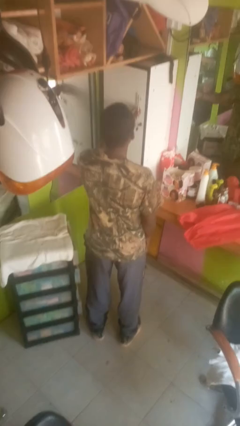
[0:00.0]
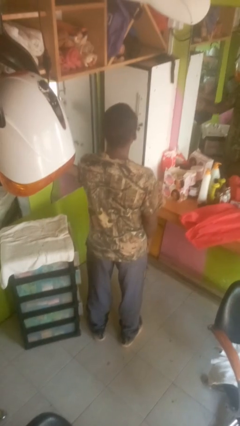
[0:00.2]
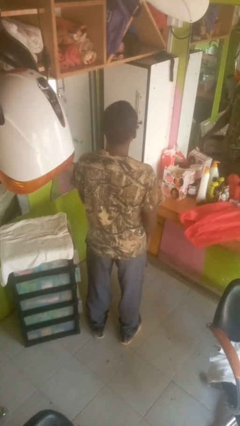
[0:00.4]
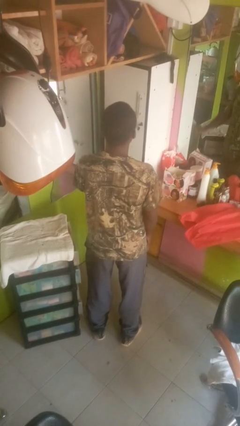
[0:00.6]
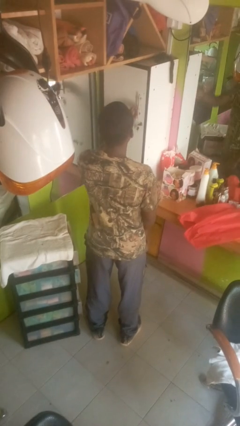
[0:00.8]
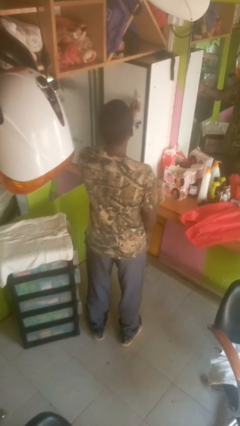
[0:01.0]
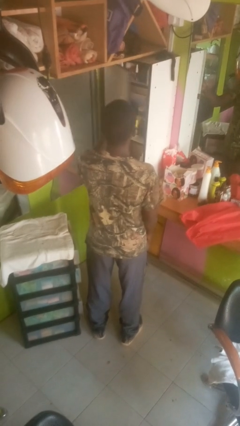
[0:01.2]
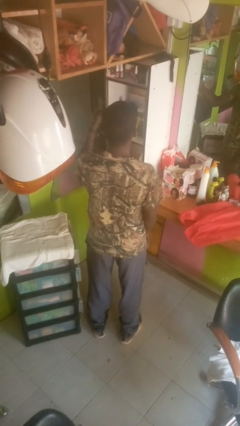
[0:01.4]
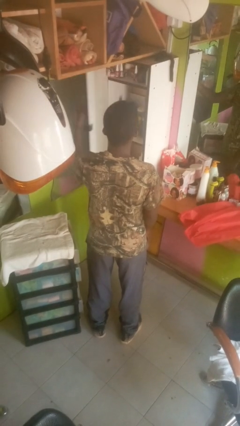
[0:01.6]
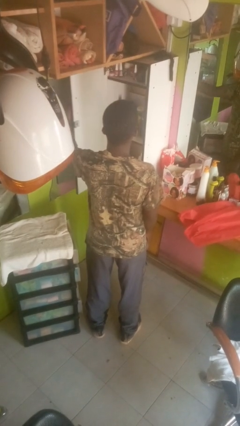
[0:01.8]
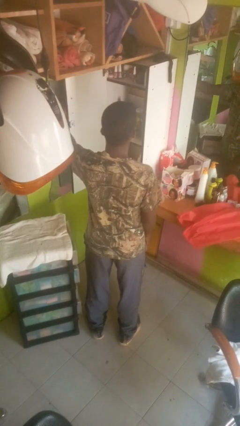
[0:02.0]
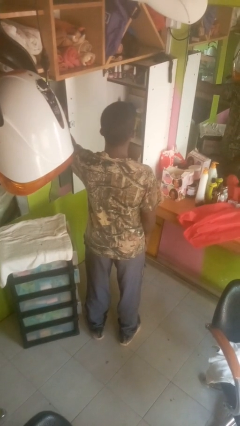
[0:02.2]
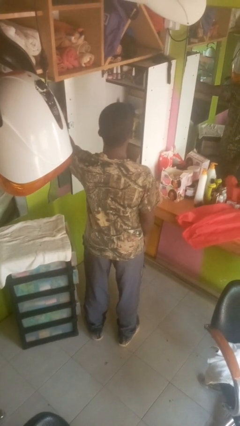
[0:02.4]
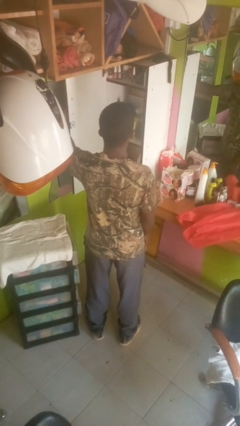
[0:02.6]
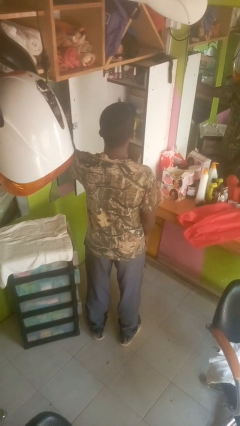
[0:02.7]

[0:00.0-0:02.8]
person opens closet door

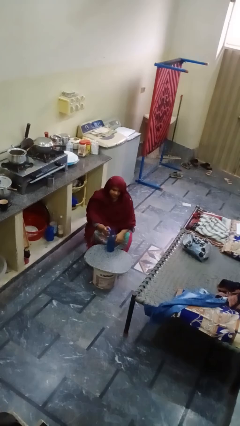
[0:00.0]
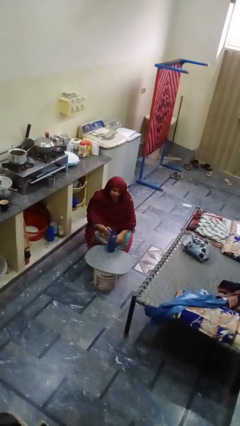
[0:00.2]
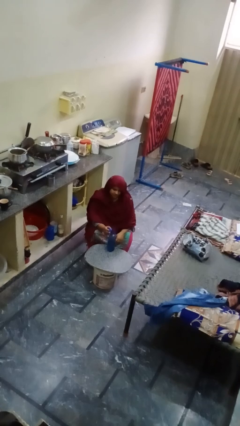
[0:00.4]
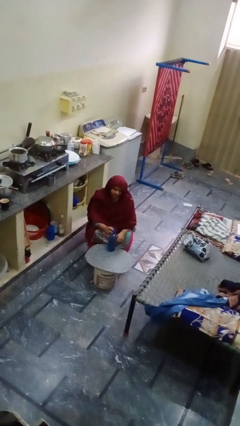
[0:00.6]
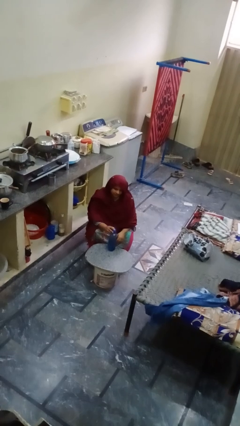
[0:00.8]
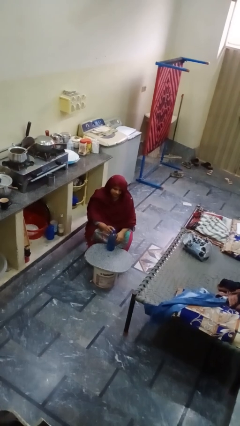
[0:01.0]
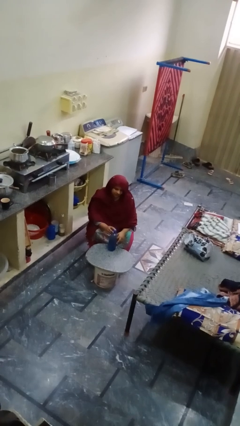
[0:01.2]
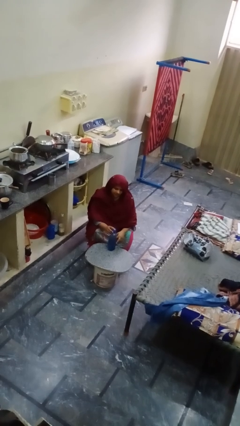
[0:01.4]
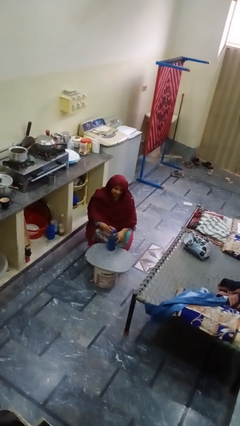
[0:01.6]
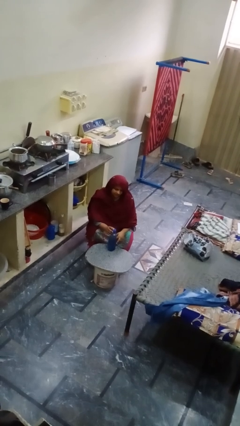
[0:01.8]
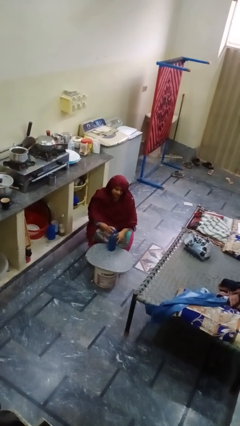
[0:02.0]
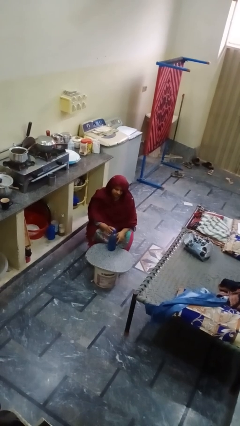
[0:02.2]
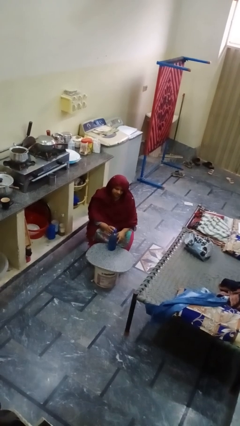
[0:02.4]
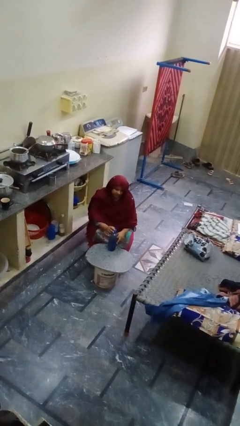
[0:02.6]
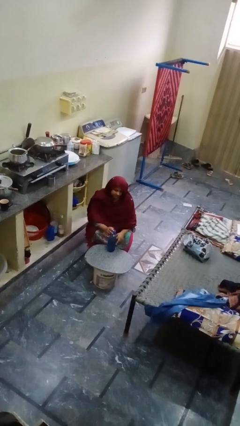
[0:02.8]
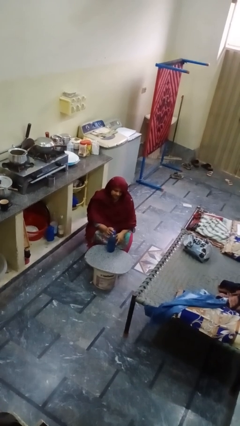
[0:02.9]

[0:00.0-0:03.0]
person screws lid to bottle

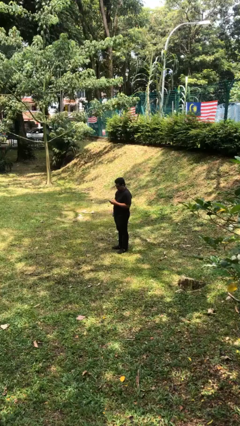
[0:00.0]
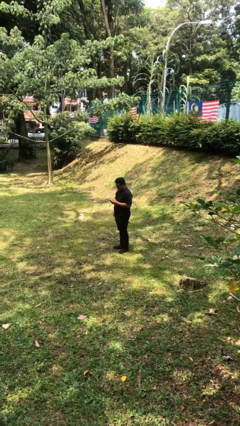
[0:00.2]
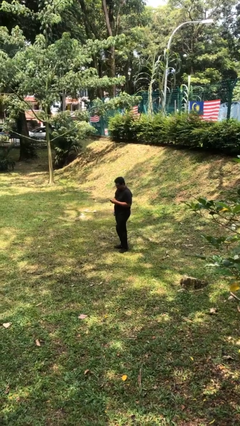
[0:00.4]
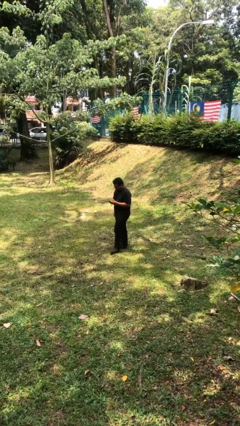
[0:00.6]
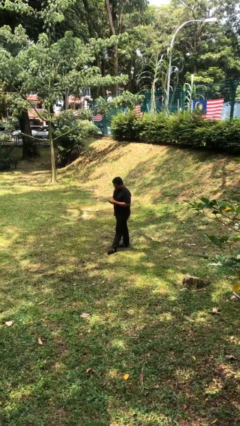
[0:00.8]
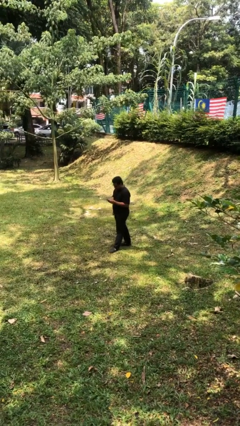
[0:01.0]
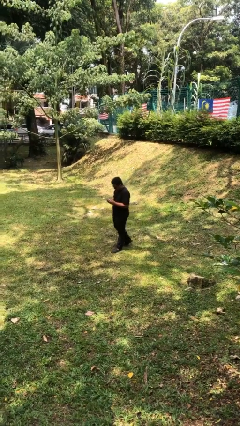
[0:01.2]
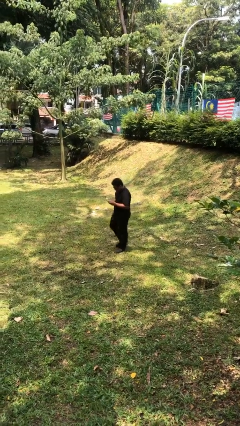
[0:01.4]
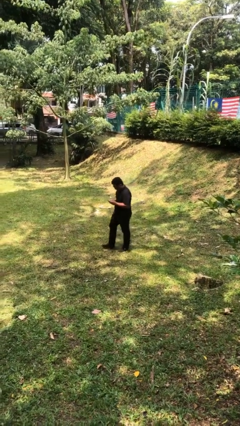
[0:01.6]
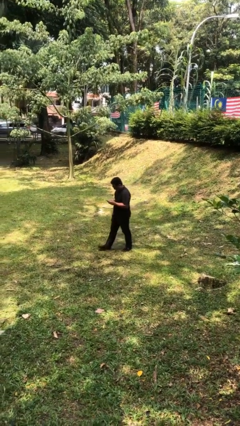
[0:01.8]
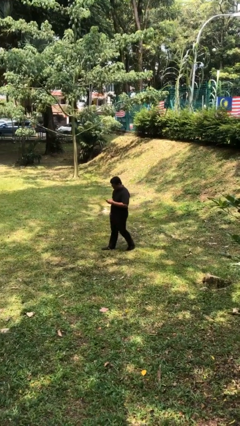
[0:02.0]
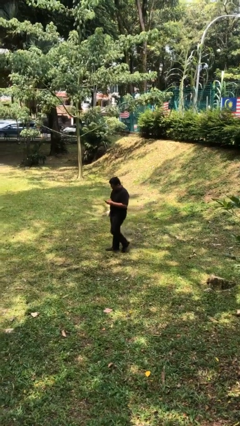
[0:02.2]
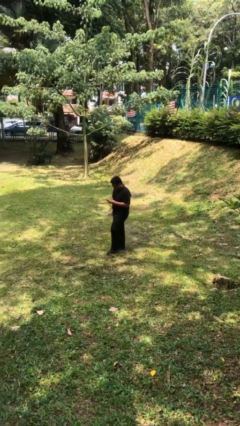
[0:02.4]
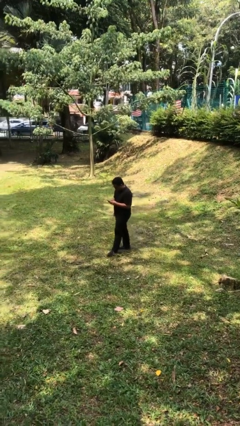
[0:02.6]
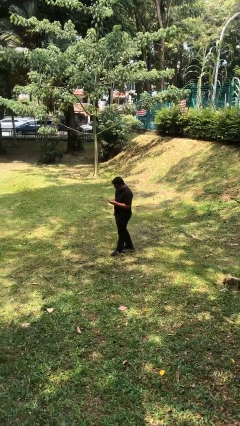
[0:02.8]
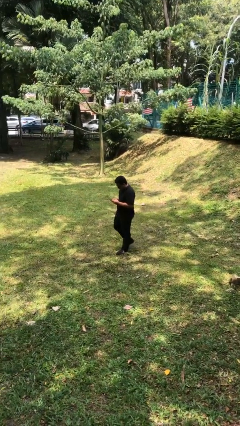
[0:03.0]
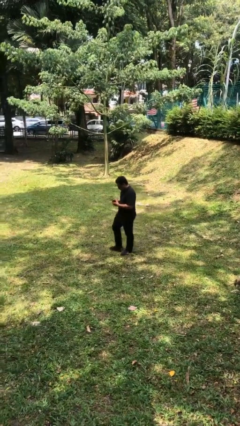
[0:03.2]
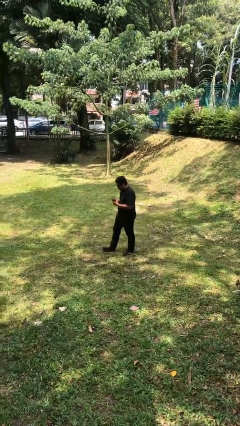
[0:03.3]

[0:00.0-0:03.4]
person texts on phone

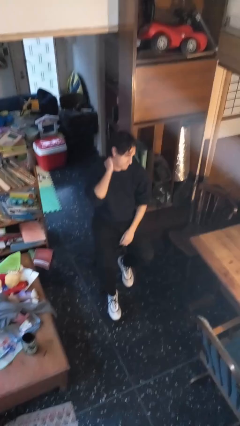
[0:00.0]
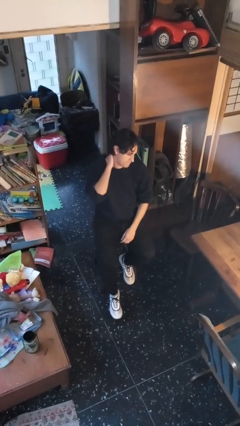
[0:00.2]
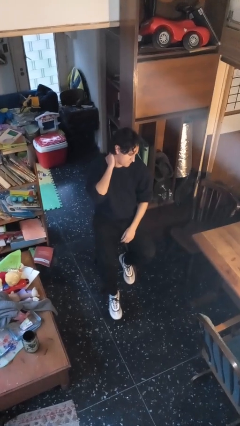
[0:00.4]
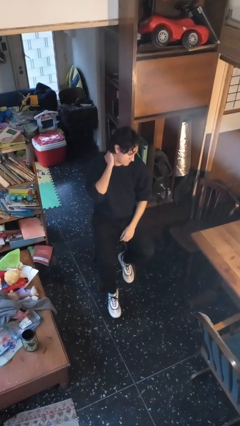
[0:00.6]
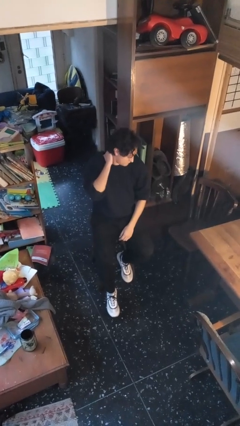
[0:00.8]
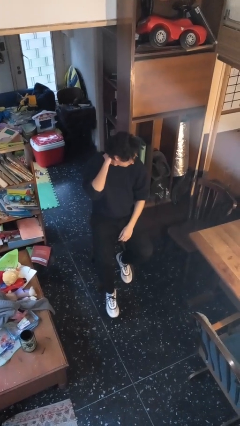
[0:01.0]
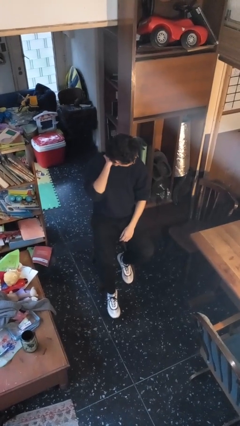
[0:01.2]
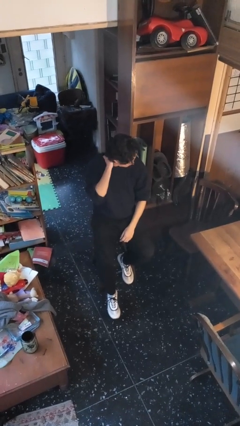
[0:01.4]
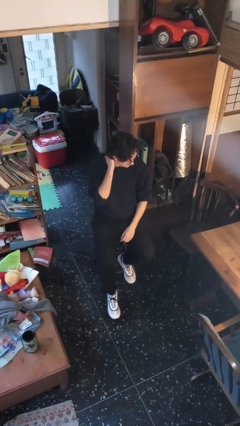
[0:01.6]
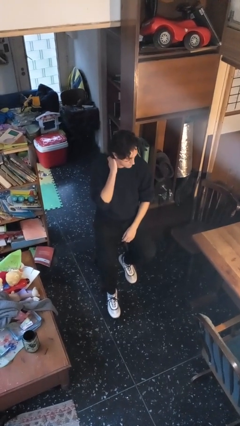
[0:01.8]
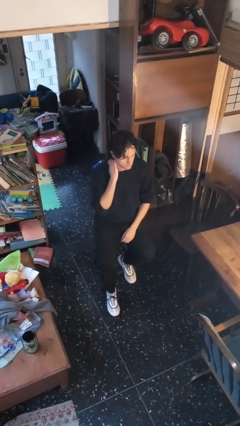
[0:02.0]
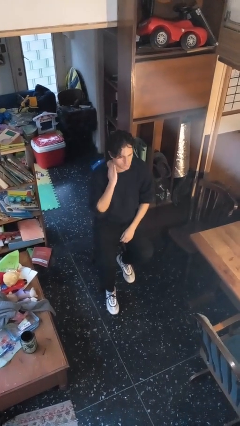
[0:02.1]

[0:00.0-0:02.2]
person rubs neck

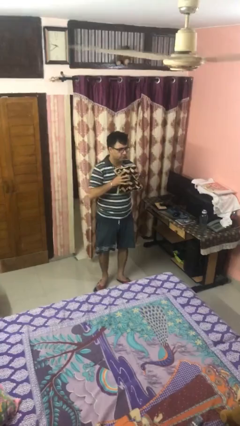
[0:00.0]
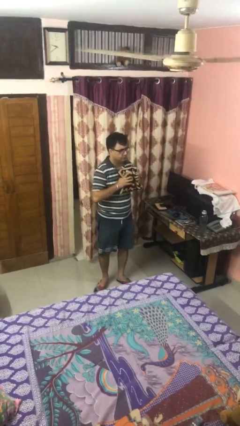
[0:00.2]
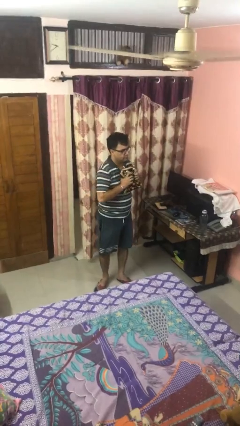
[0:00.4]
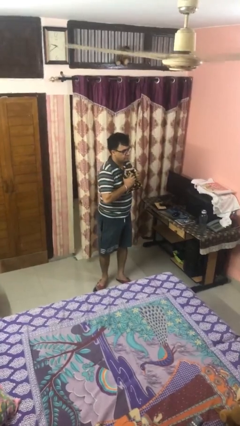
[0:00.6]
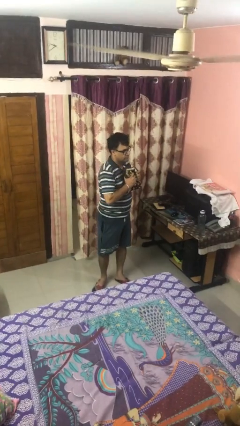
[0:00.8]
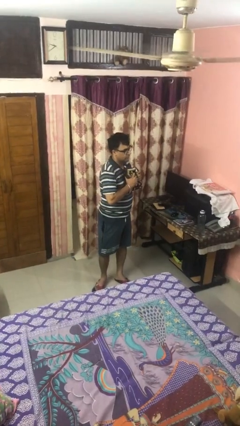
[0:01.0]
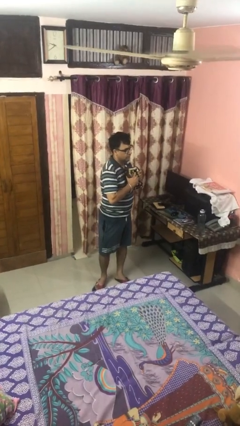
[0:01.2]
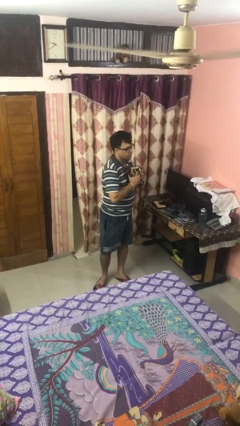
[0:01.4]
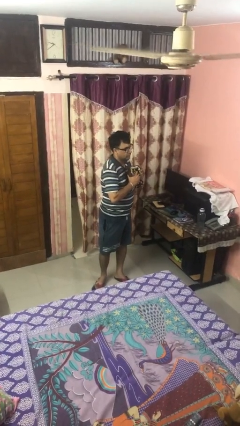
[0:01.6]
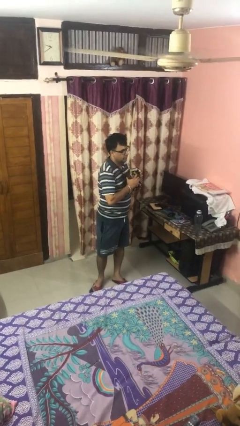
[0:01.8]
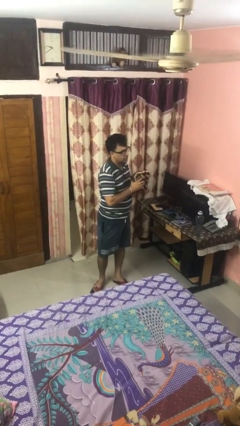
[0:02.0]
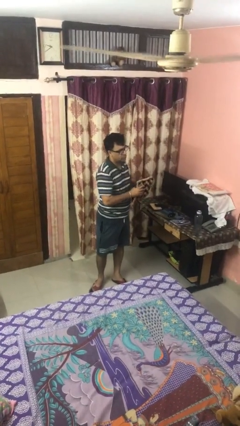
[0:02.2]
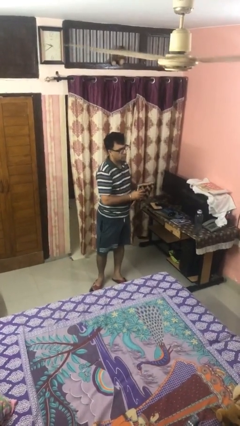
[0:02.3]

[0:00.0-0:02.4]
person squeezes object

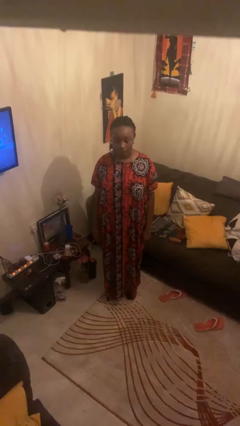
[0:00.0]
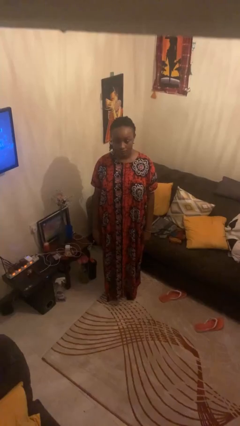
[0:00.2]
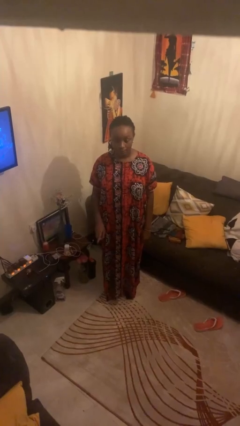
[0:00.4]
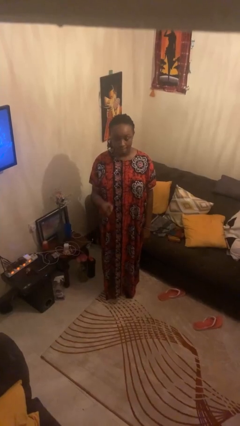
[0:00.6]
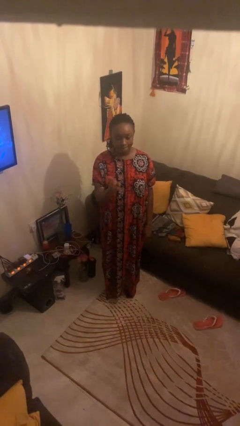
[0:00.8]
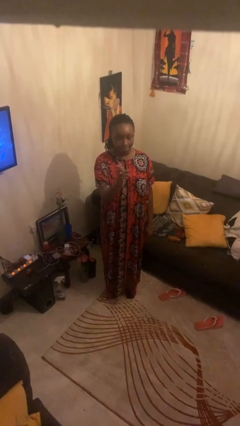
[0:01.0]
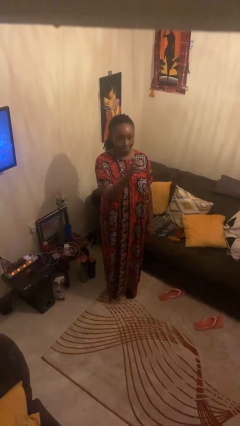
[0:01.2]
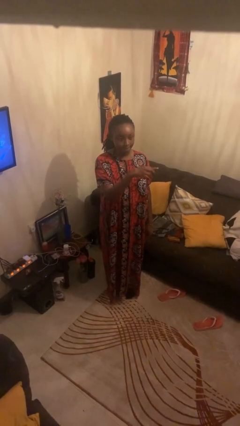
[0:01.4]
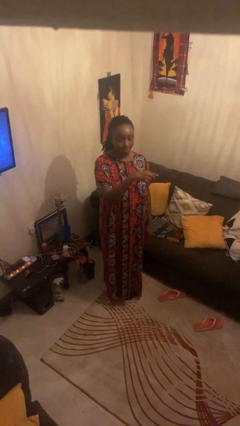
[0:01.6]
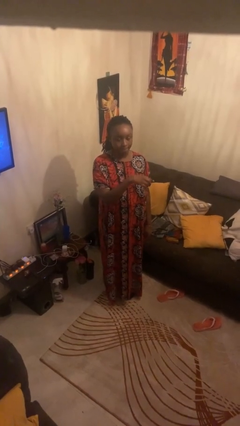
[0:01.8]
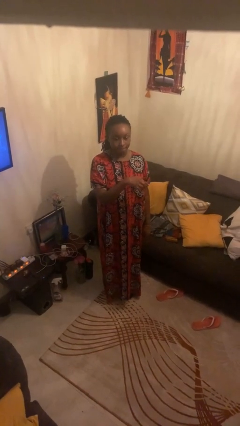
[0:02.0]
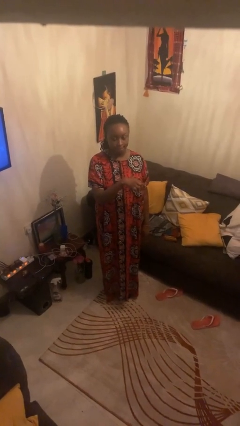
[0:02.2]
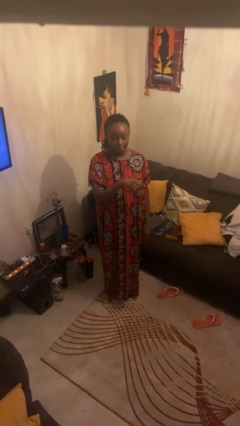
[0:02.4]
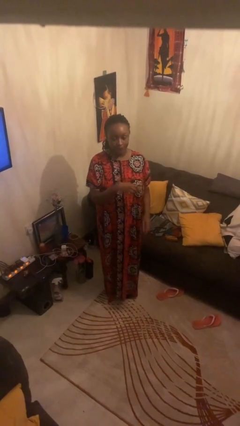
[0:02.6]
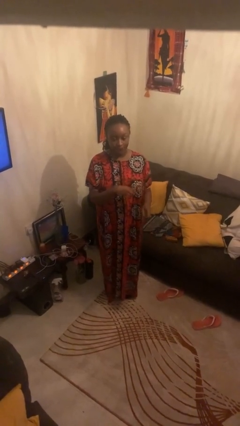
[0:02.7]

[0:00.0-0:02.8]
person gestures swipe left

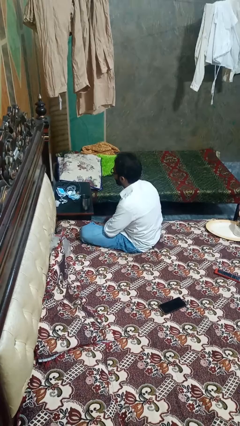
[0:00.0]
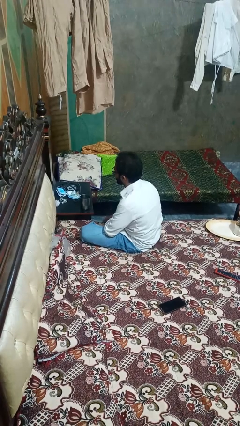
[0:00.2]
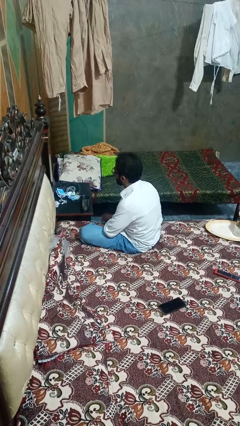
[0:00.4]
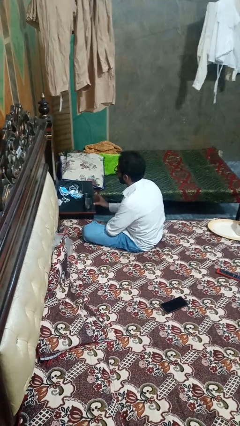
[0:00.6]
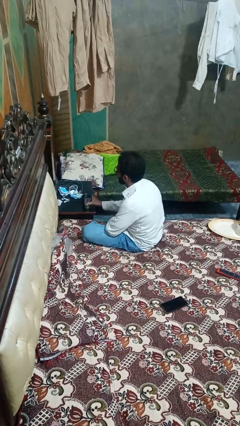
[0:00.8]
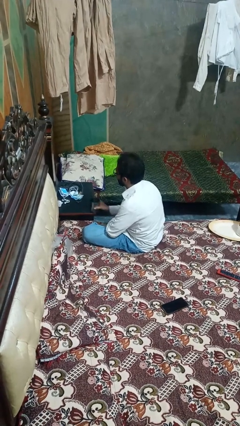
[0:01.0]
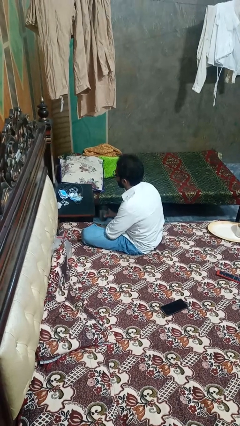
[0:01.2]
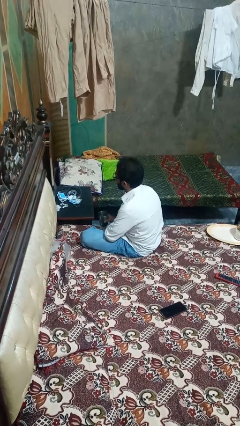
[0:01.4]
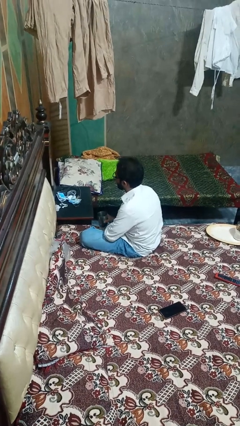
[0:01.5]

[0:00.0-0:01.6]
person picks up object from table
